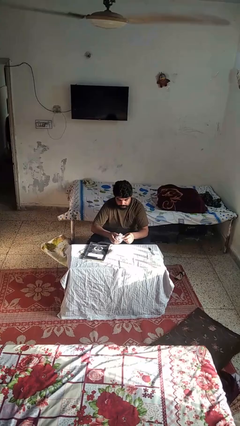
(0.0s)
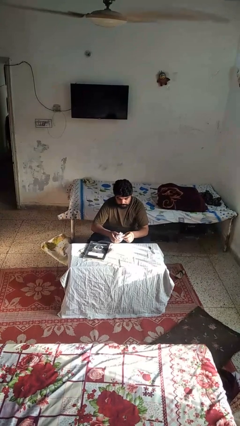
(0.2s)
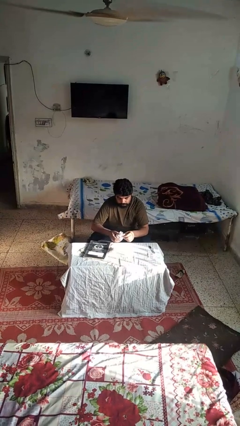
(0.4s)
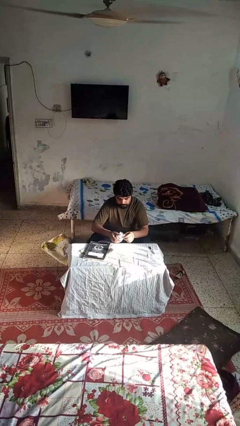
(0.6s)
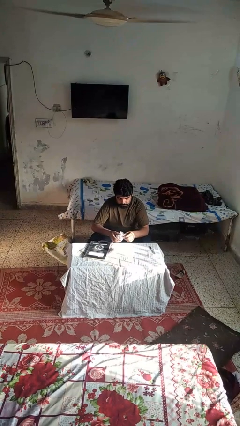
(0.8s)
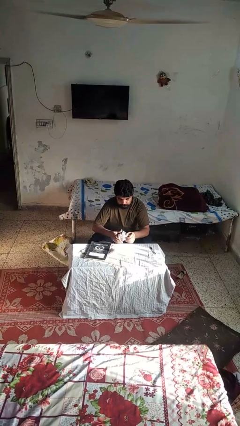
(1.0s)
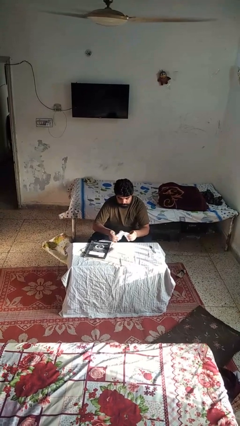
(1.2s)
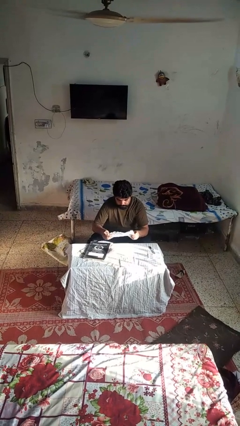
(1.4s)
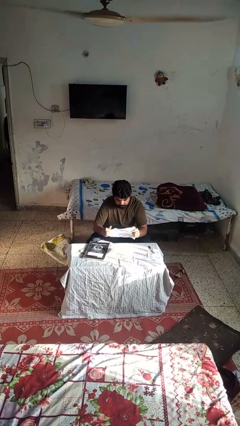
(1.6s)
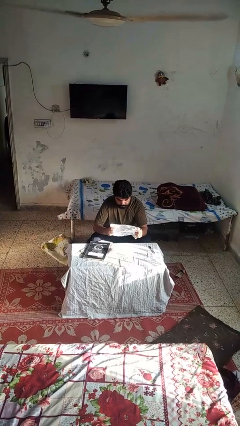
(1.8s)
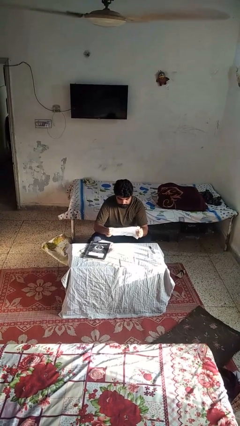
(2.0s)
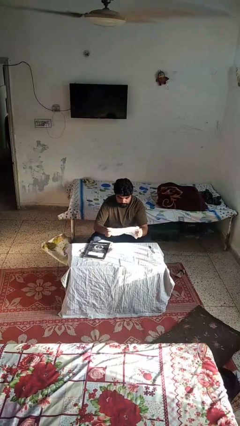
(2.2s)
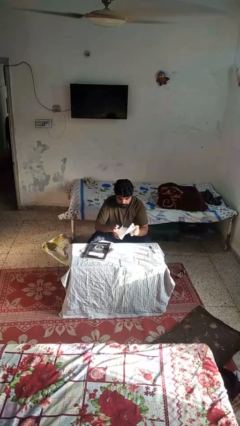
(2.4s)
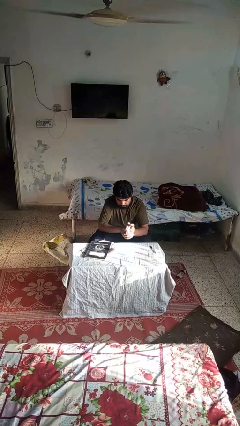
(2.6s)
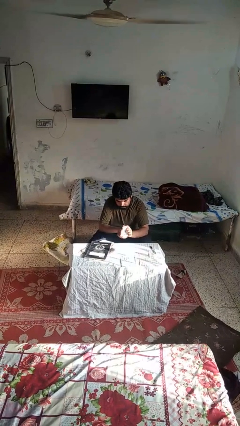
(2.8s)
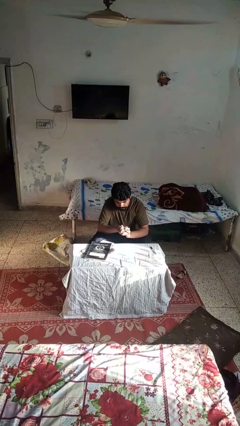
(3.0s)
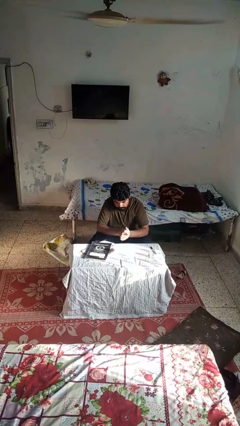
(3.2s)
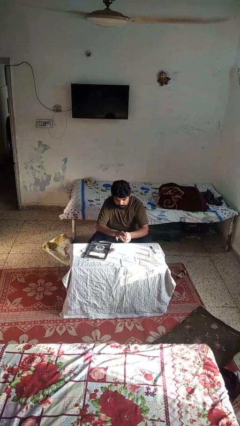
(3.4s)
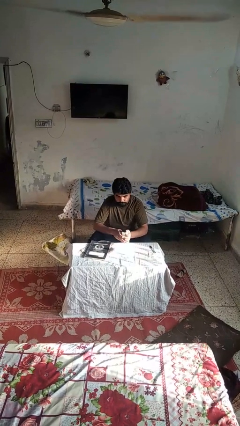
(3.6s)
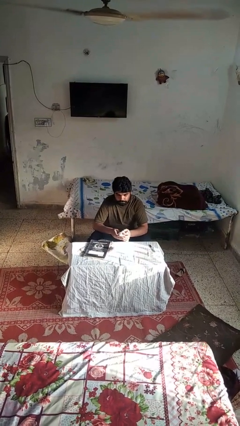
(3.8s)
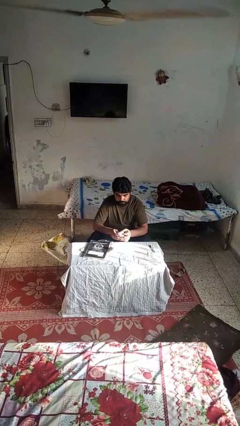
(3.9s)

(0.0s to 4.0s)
person crumples paper

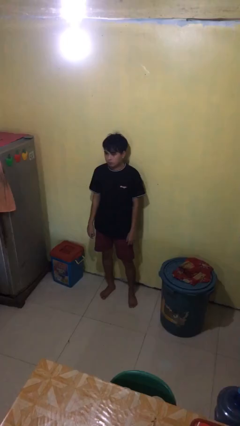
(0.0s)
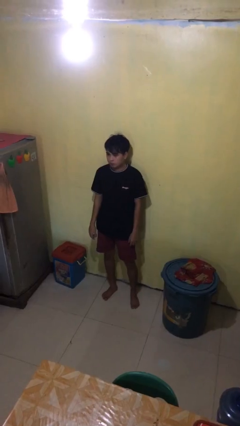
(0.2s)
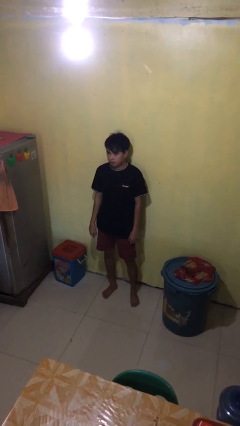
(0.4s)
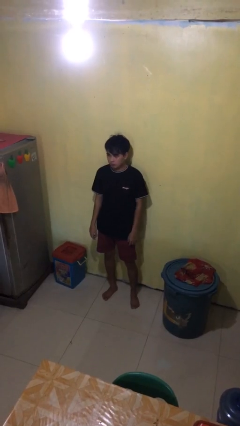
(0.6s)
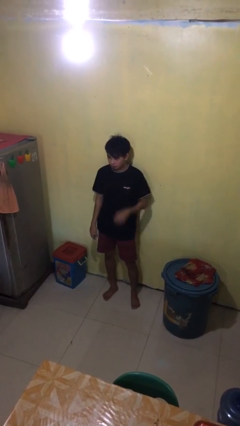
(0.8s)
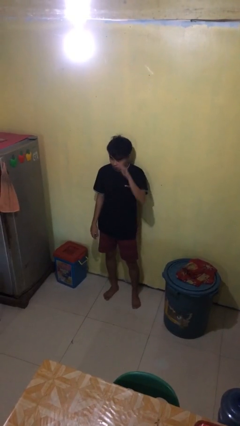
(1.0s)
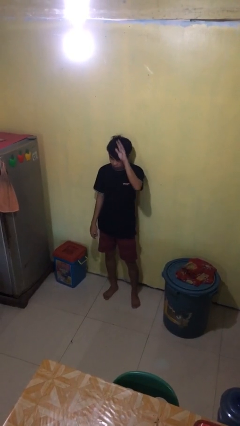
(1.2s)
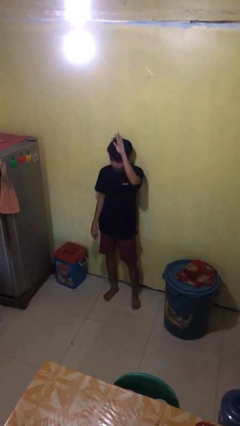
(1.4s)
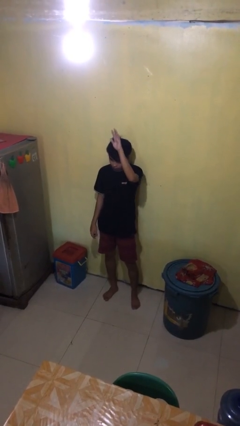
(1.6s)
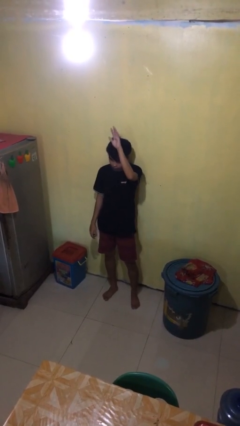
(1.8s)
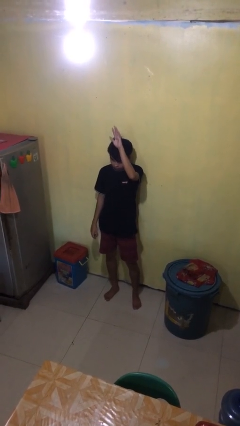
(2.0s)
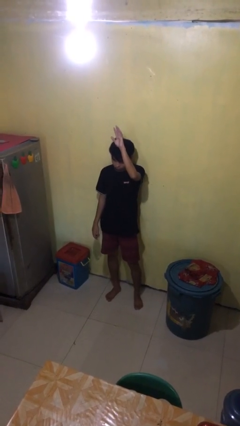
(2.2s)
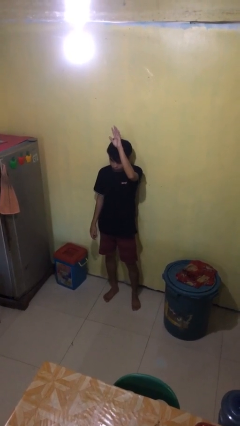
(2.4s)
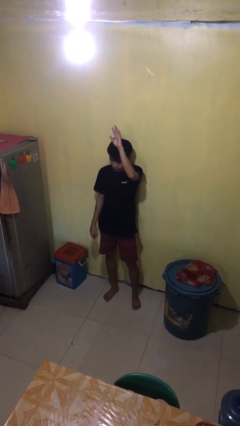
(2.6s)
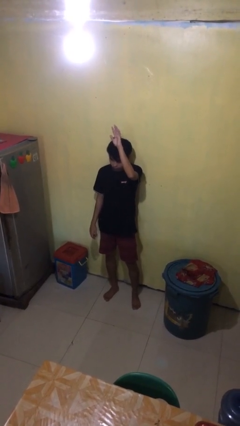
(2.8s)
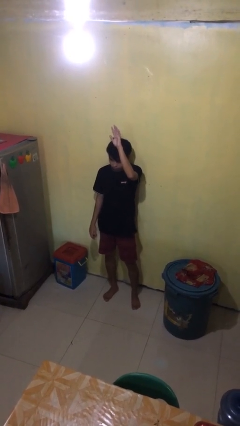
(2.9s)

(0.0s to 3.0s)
person gestures raise hand

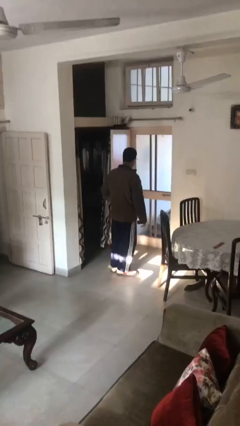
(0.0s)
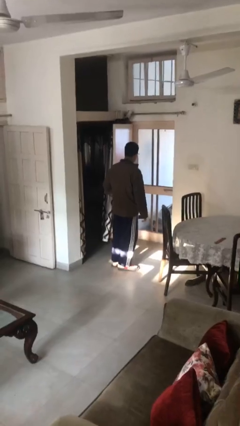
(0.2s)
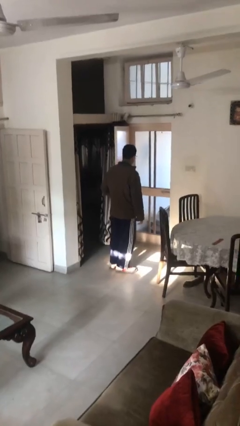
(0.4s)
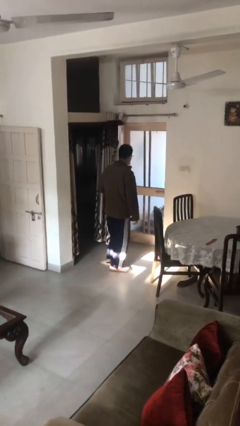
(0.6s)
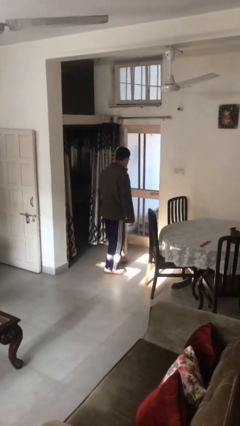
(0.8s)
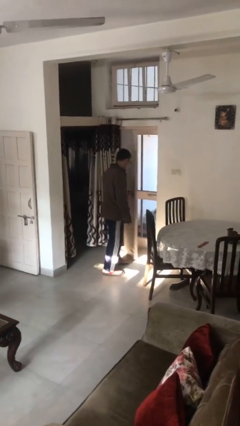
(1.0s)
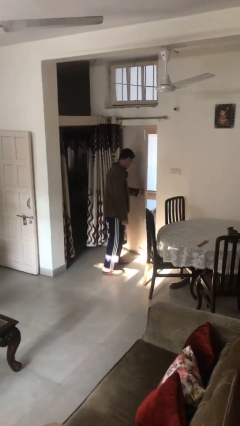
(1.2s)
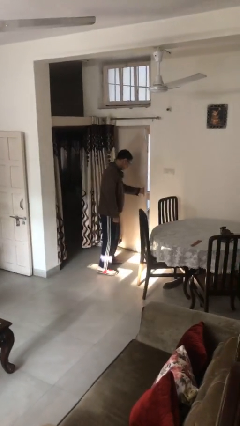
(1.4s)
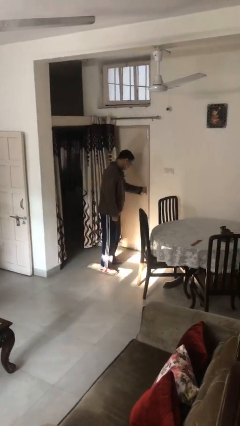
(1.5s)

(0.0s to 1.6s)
person closes facility door

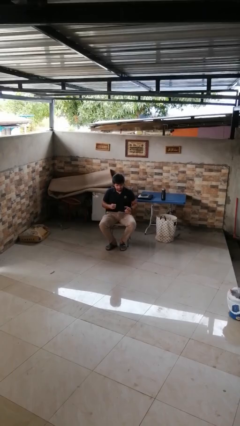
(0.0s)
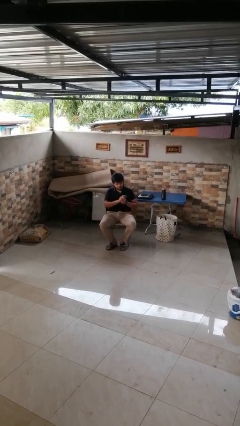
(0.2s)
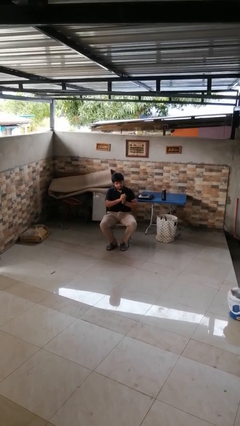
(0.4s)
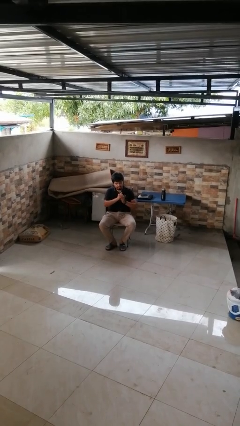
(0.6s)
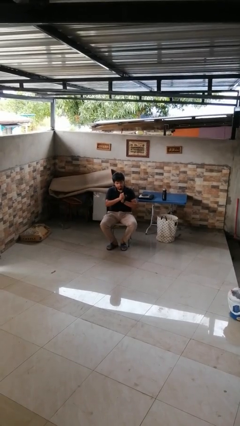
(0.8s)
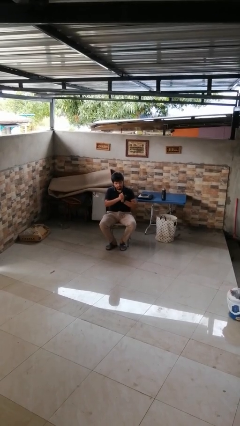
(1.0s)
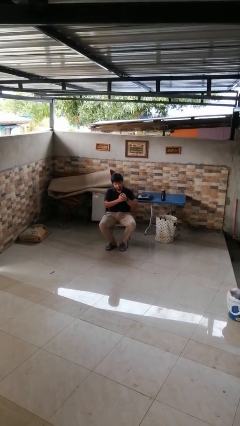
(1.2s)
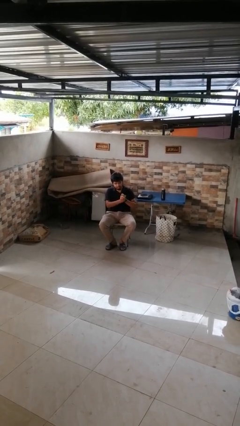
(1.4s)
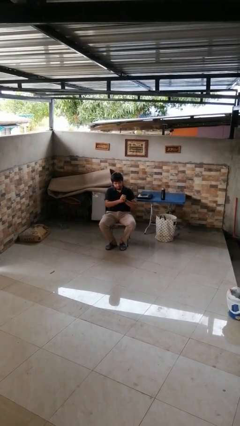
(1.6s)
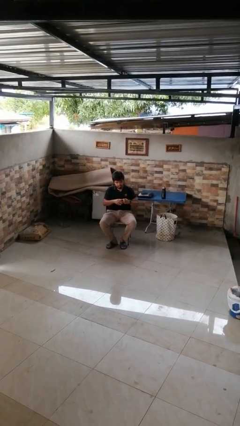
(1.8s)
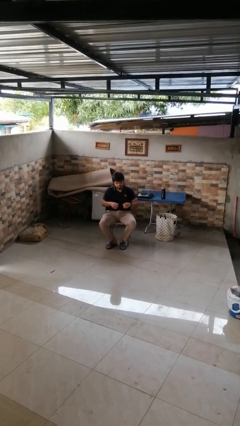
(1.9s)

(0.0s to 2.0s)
person cracks knuckles

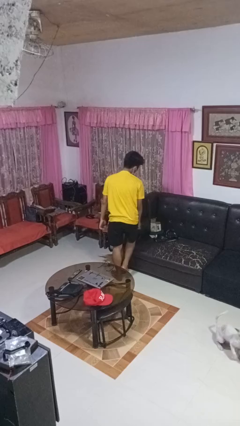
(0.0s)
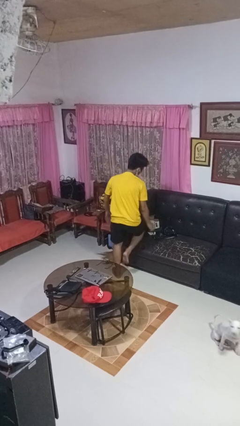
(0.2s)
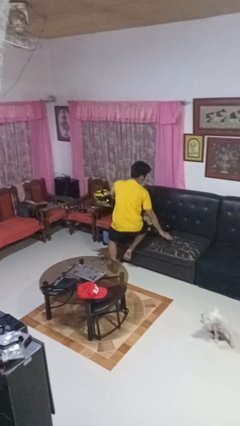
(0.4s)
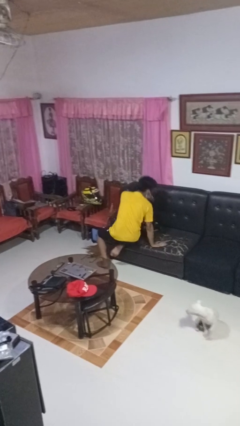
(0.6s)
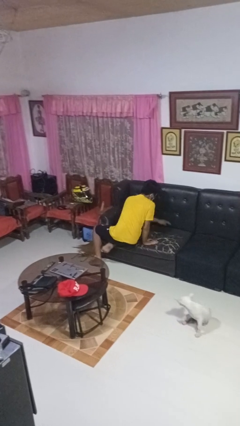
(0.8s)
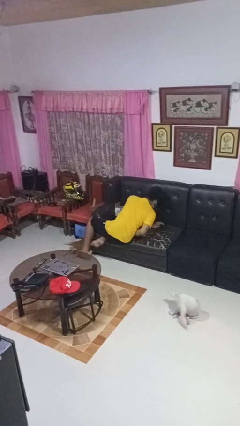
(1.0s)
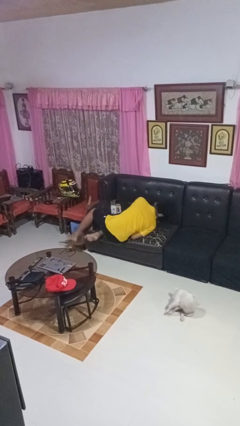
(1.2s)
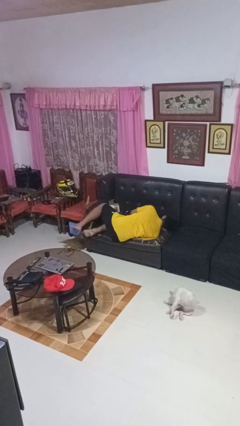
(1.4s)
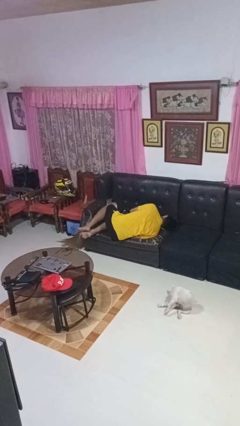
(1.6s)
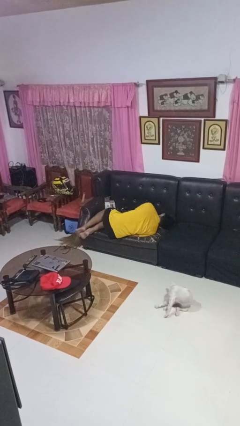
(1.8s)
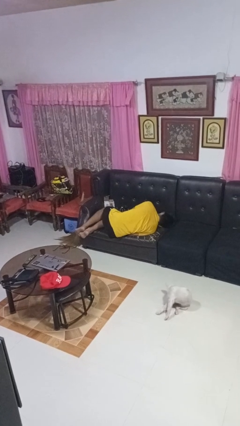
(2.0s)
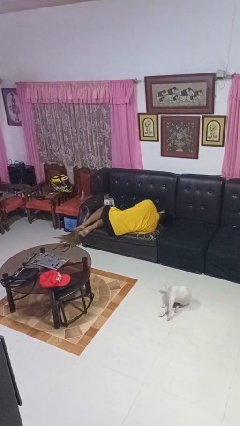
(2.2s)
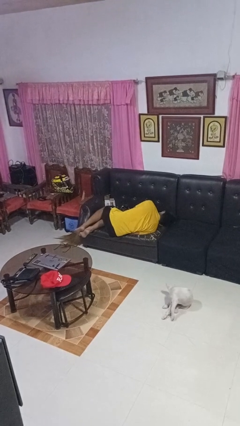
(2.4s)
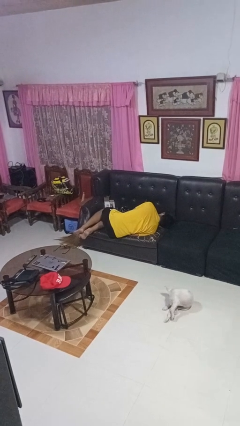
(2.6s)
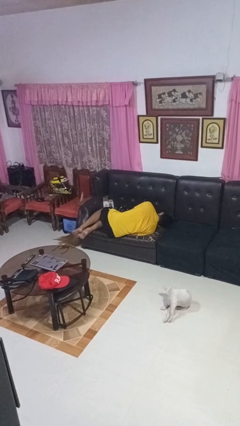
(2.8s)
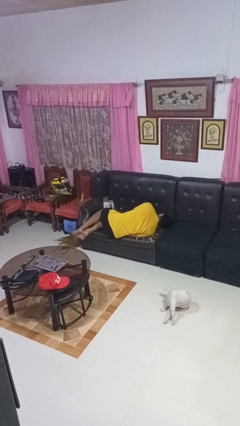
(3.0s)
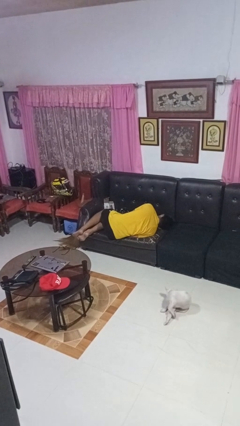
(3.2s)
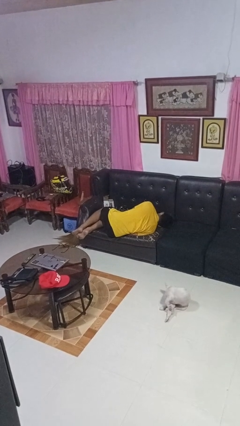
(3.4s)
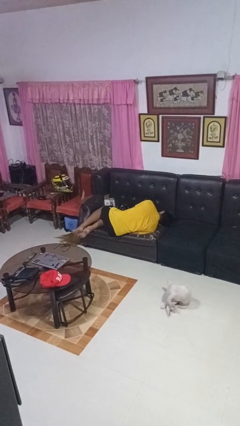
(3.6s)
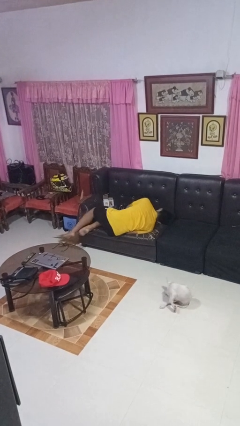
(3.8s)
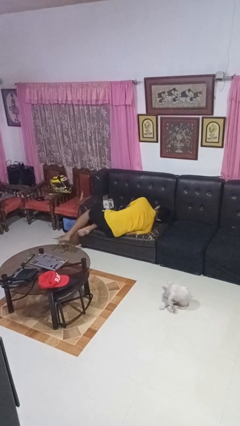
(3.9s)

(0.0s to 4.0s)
person lies down on couch

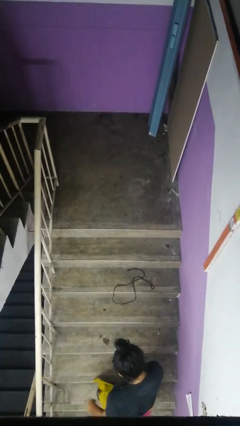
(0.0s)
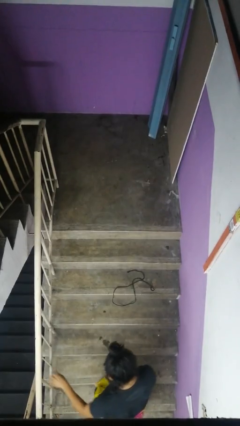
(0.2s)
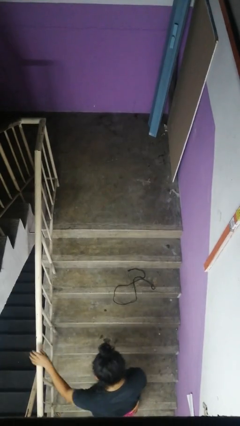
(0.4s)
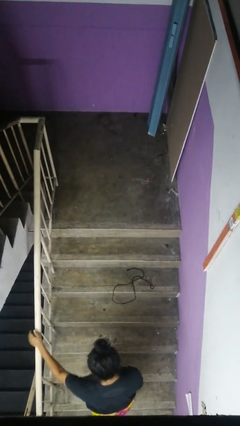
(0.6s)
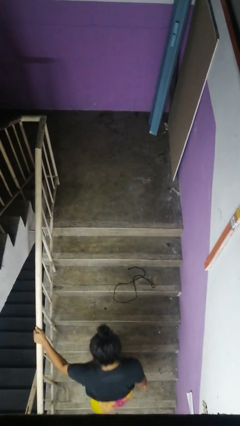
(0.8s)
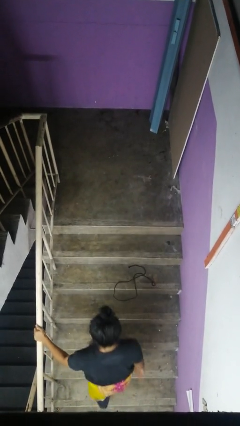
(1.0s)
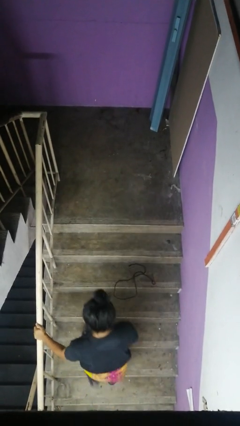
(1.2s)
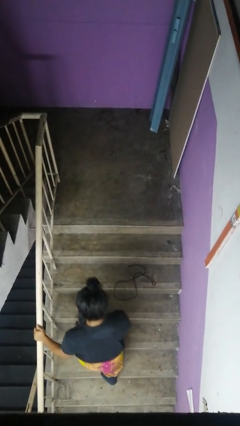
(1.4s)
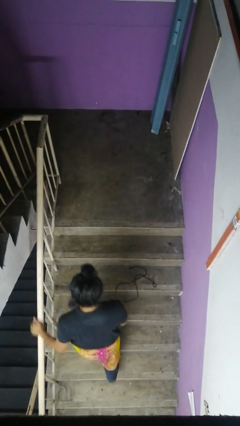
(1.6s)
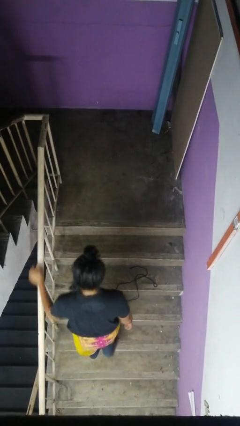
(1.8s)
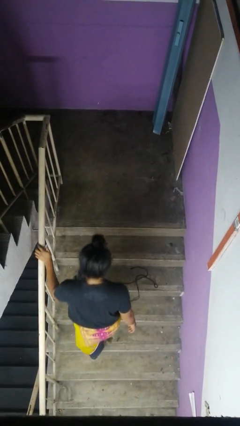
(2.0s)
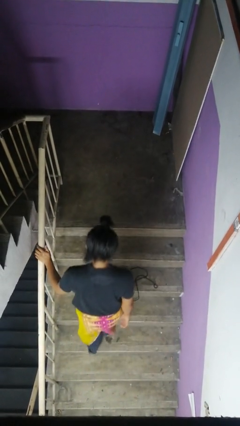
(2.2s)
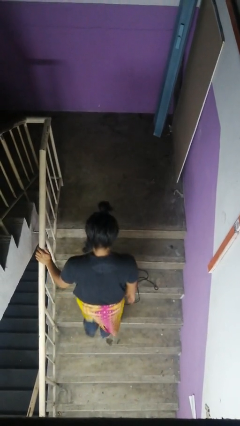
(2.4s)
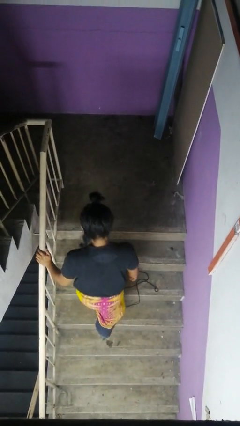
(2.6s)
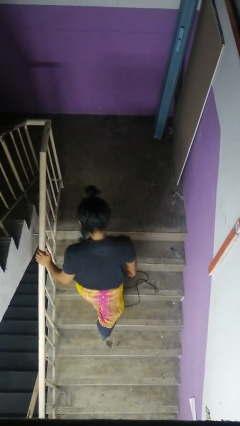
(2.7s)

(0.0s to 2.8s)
person climbs up stairs
